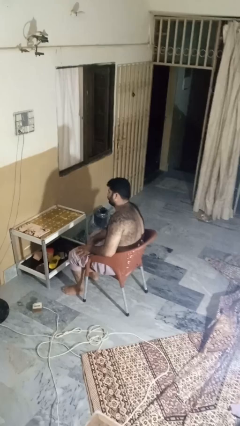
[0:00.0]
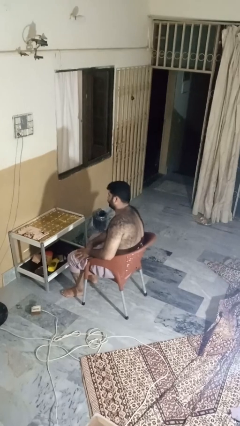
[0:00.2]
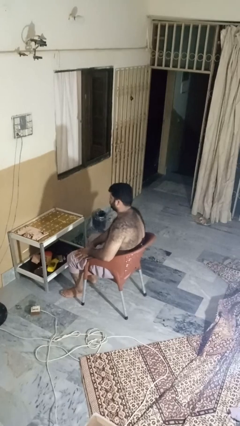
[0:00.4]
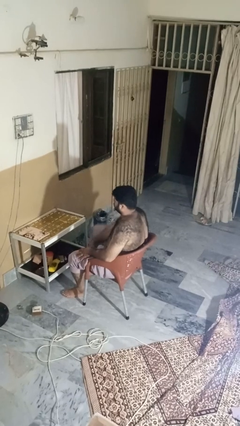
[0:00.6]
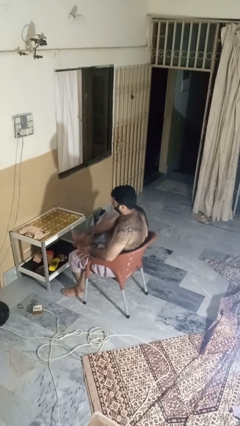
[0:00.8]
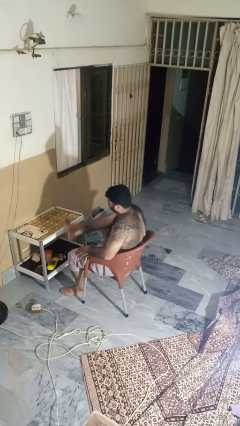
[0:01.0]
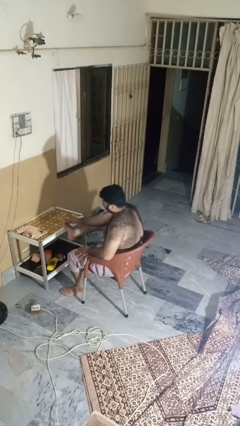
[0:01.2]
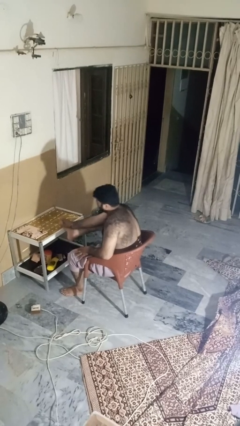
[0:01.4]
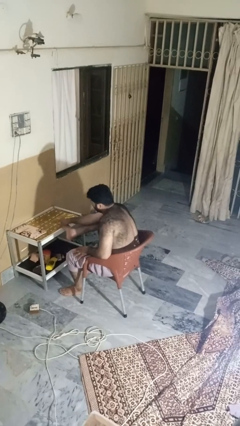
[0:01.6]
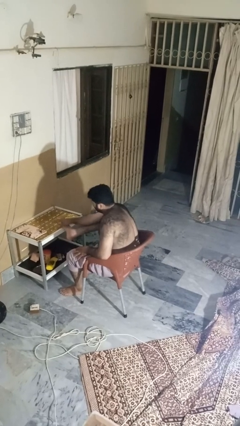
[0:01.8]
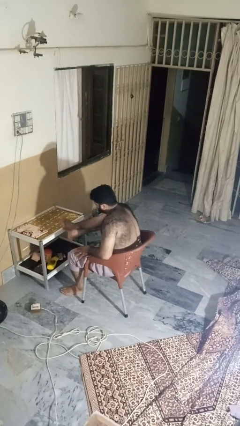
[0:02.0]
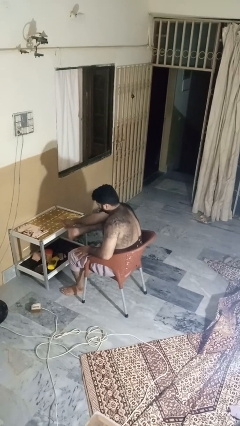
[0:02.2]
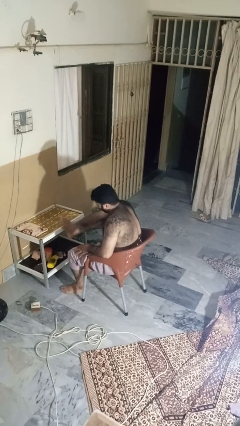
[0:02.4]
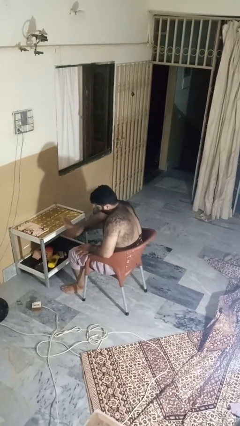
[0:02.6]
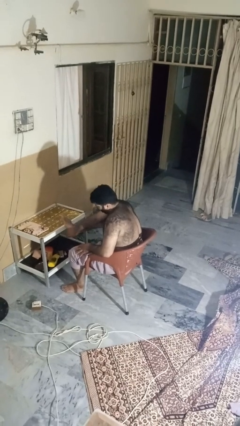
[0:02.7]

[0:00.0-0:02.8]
person stubs toe

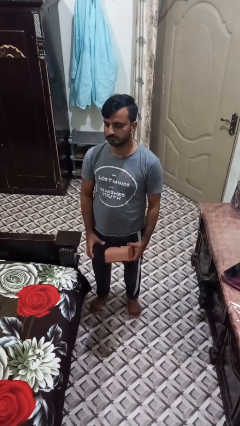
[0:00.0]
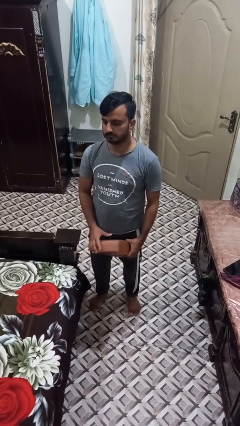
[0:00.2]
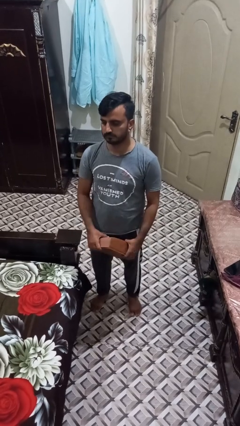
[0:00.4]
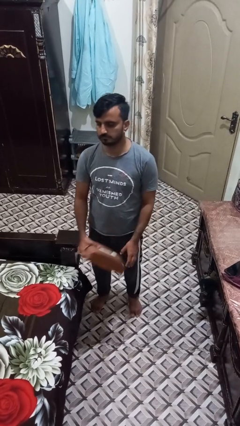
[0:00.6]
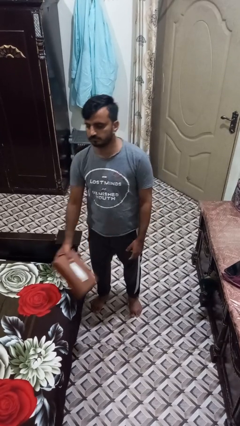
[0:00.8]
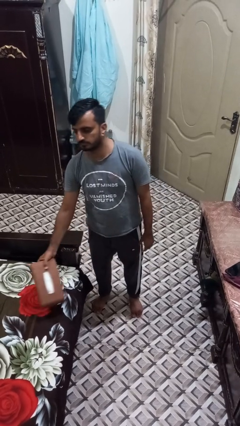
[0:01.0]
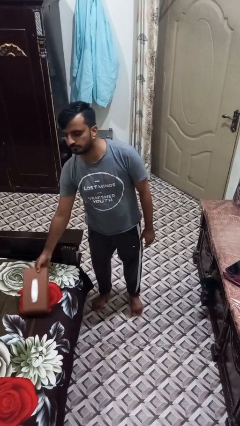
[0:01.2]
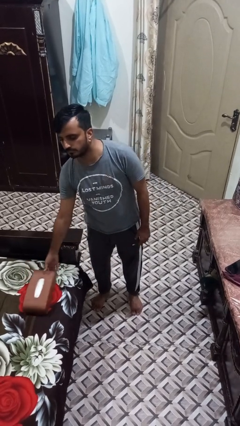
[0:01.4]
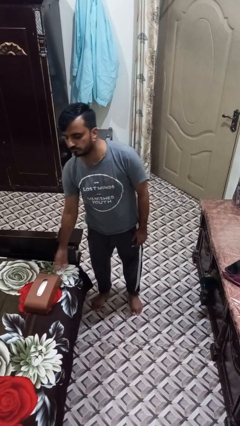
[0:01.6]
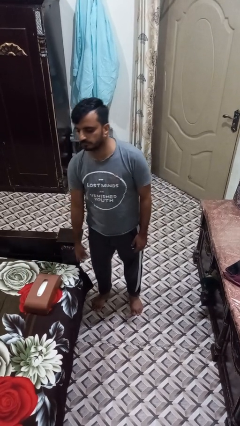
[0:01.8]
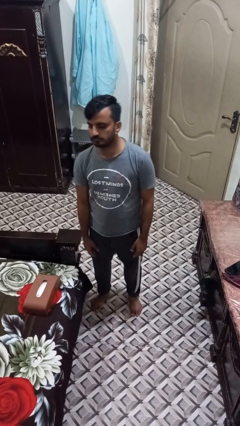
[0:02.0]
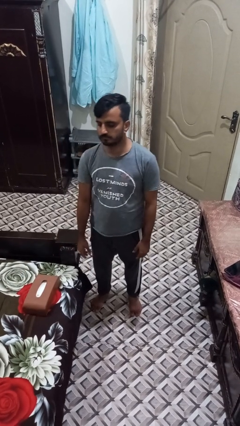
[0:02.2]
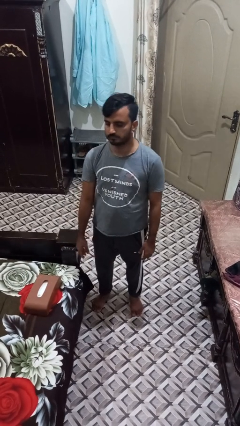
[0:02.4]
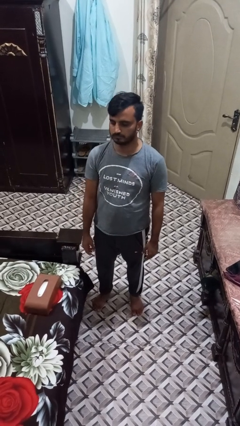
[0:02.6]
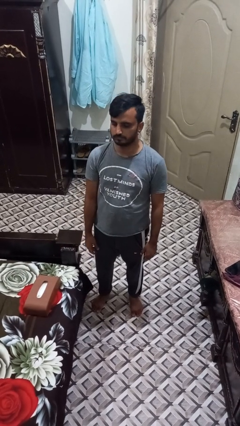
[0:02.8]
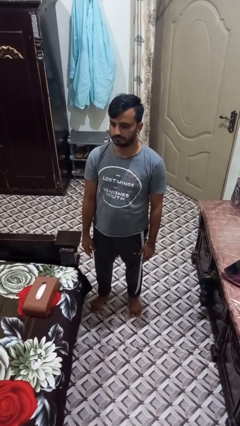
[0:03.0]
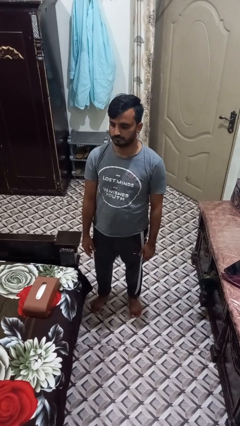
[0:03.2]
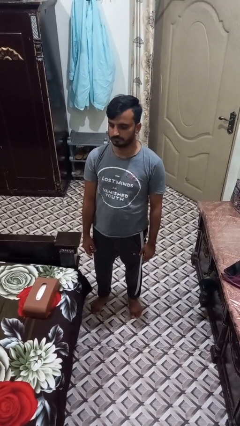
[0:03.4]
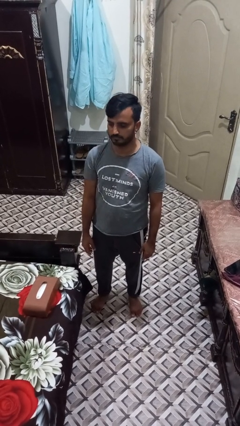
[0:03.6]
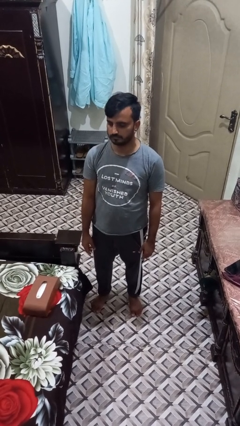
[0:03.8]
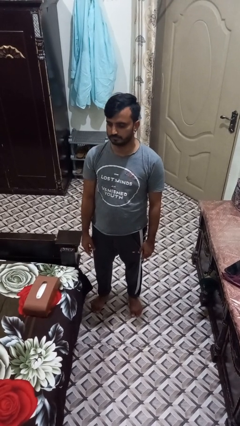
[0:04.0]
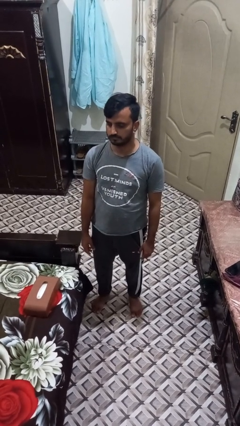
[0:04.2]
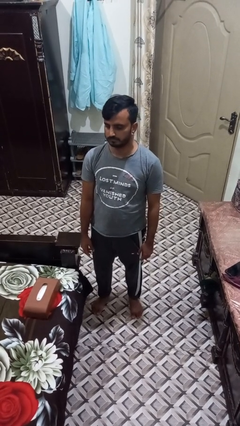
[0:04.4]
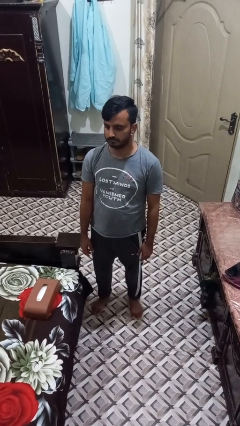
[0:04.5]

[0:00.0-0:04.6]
person puts down object on bed

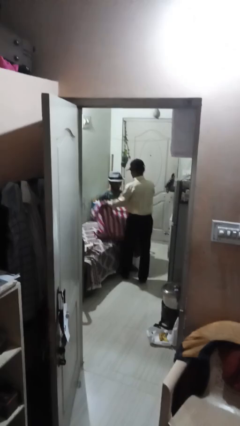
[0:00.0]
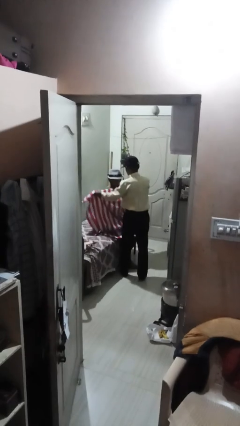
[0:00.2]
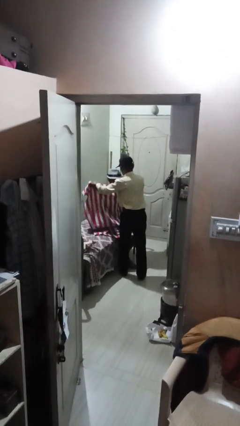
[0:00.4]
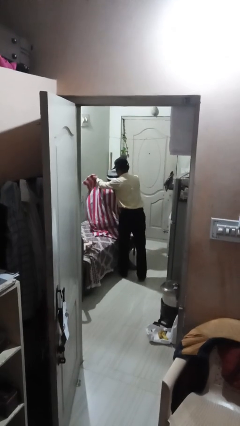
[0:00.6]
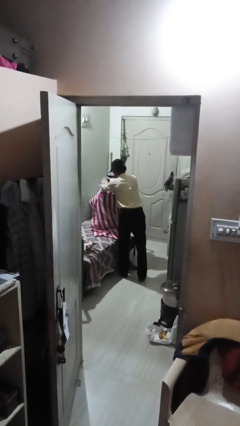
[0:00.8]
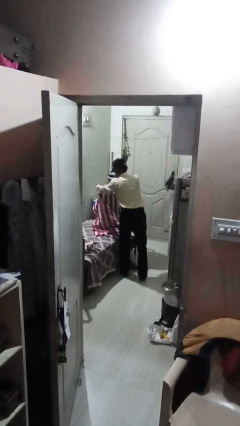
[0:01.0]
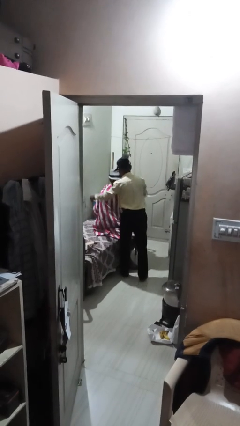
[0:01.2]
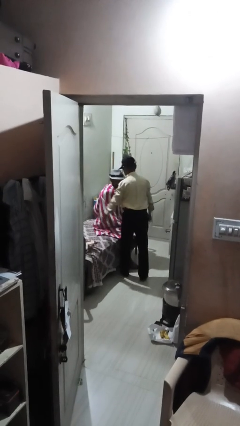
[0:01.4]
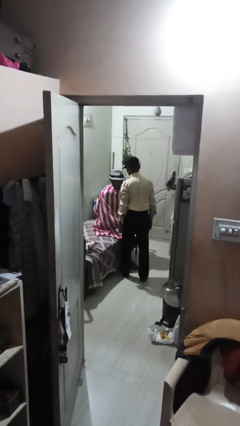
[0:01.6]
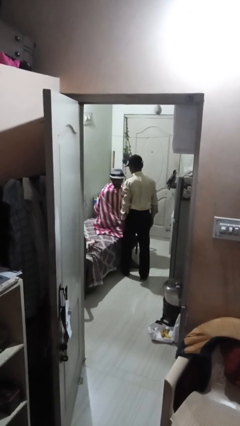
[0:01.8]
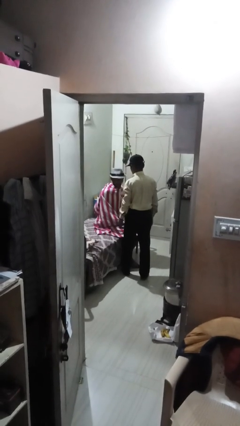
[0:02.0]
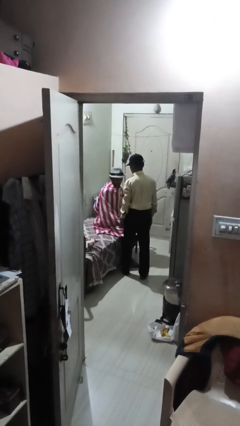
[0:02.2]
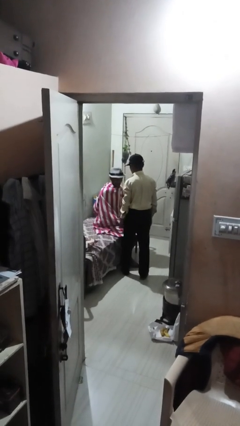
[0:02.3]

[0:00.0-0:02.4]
person covers friend with blanket

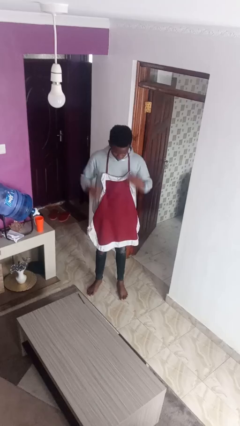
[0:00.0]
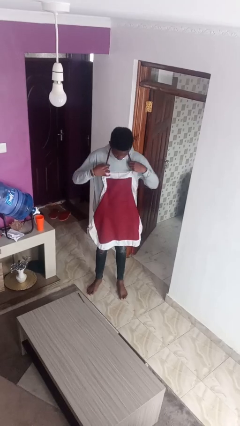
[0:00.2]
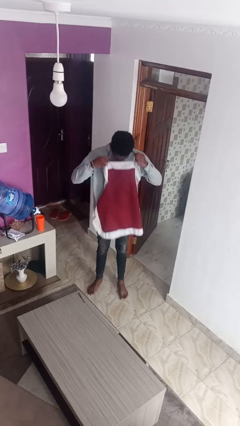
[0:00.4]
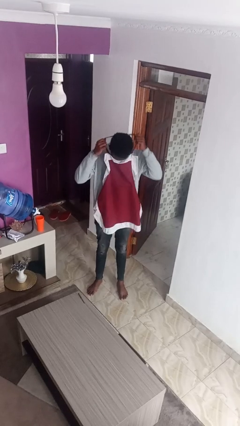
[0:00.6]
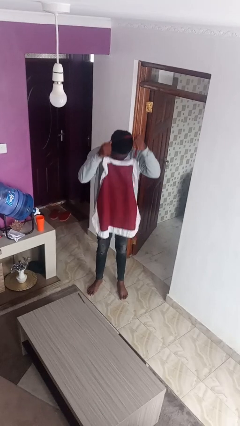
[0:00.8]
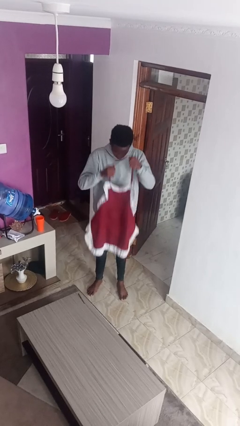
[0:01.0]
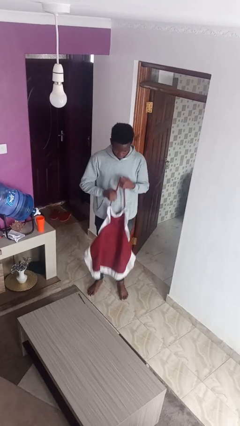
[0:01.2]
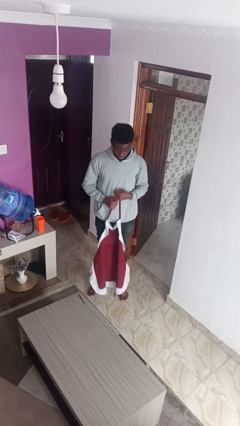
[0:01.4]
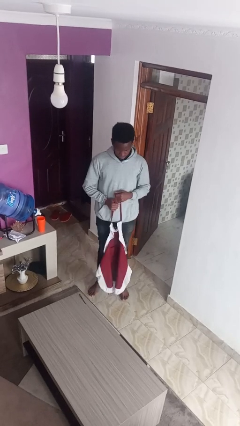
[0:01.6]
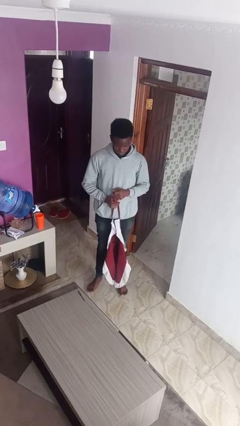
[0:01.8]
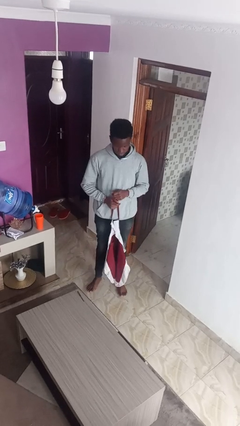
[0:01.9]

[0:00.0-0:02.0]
person takes off apron

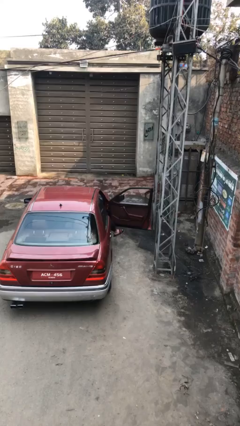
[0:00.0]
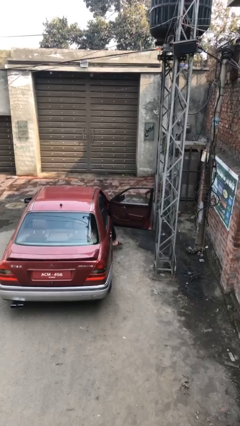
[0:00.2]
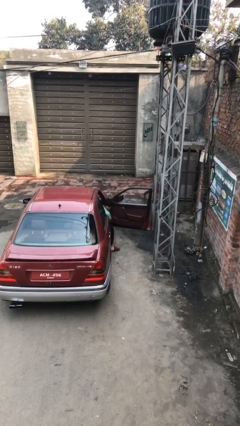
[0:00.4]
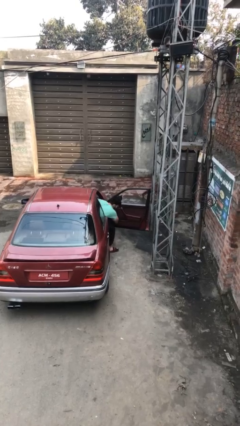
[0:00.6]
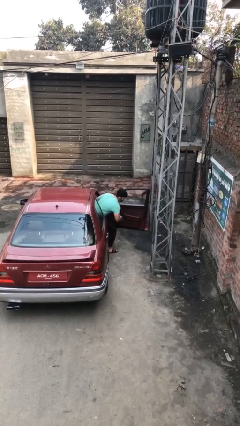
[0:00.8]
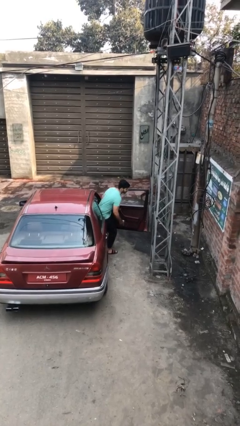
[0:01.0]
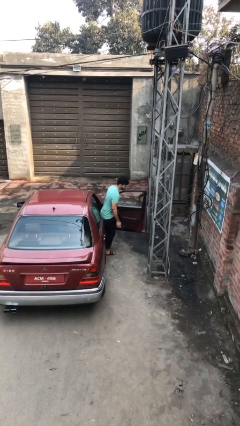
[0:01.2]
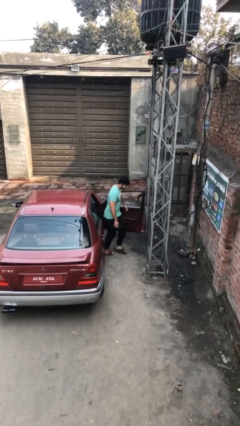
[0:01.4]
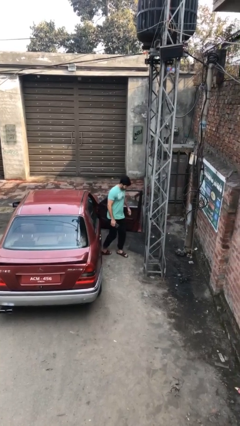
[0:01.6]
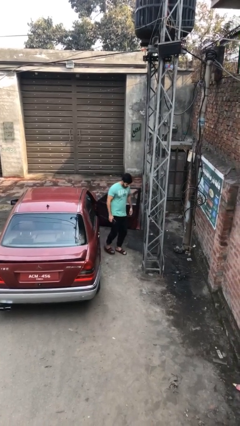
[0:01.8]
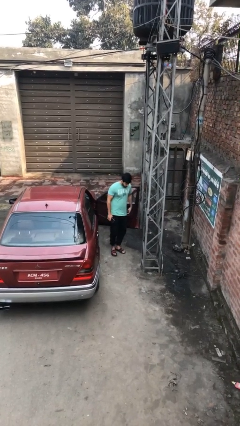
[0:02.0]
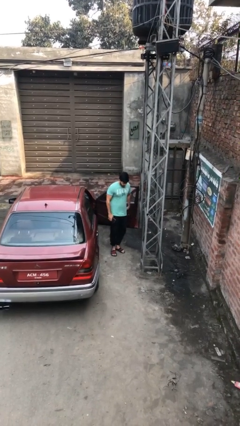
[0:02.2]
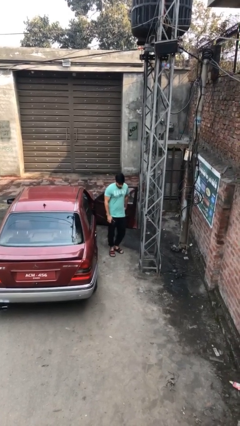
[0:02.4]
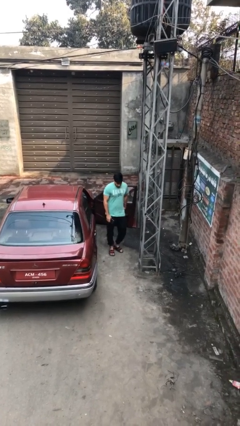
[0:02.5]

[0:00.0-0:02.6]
person exits car

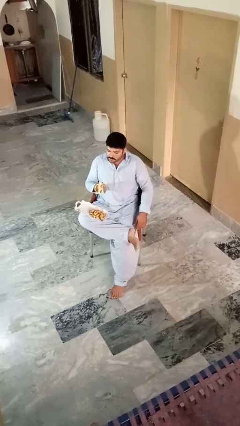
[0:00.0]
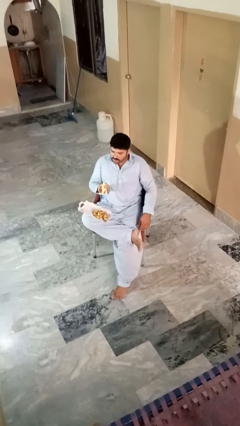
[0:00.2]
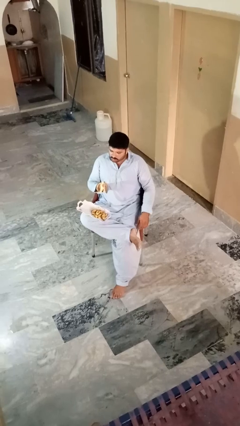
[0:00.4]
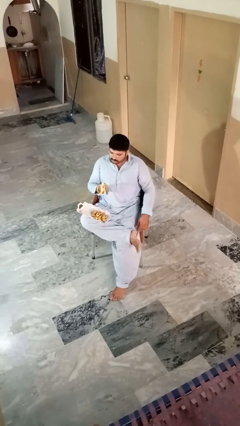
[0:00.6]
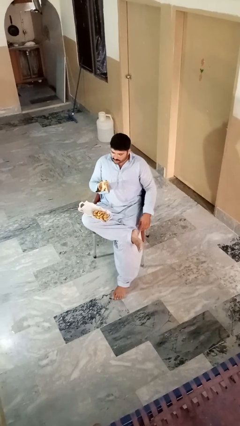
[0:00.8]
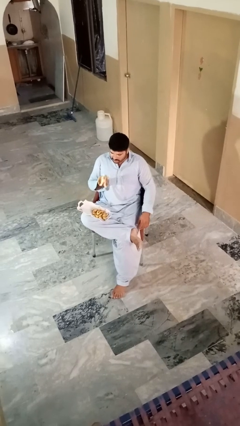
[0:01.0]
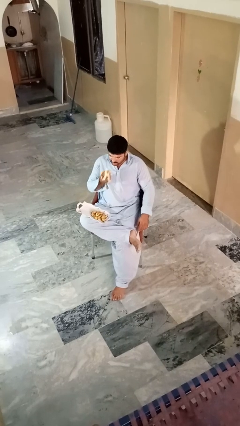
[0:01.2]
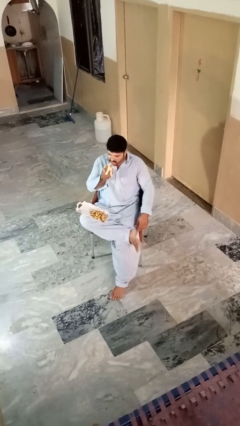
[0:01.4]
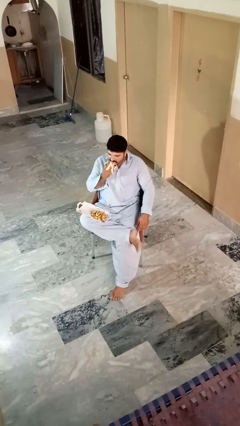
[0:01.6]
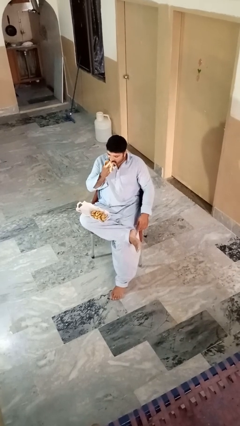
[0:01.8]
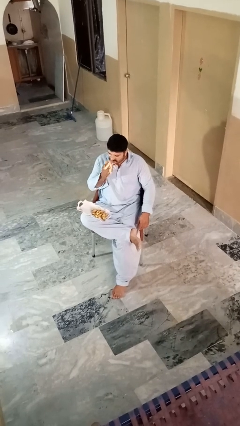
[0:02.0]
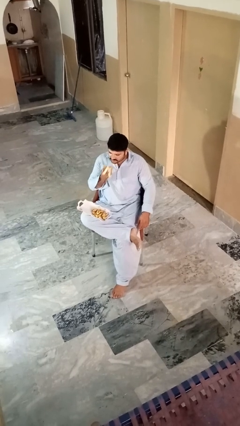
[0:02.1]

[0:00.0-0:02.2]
person eats banana

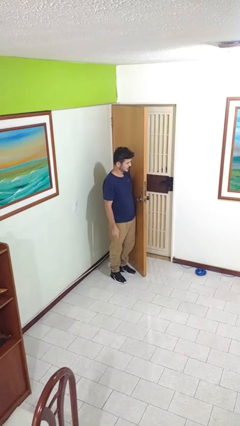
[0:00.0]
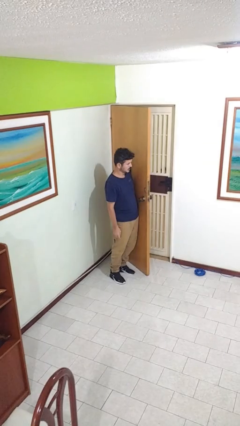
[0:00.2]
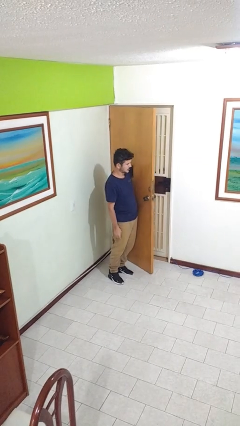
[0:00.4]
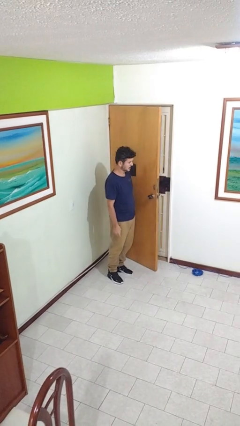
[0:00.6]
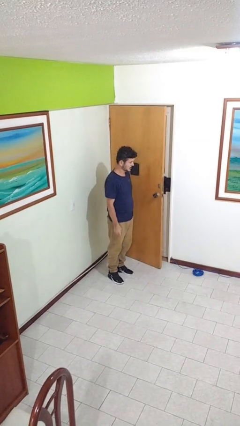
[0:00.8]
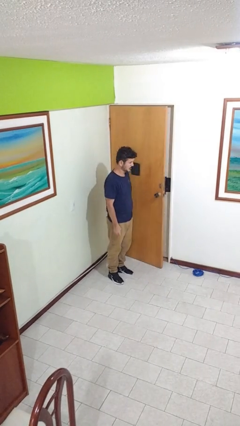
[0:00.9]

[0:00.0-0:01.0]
person closes door with hip
